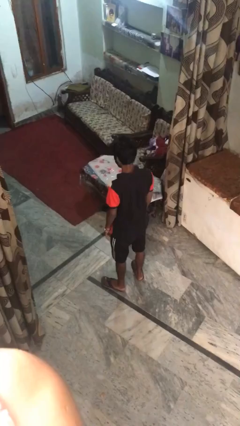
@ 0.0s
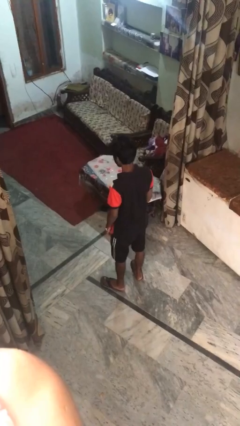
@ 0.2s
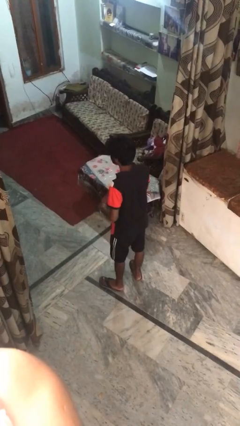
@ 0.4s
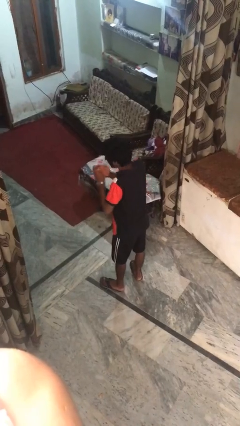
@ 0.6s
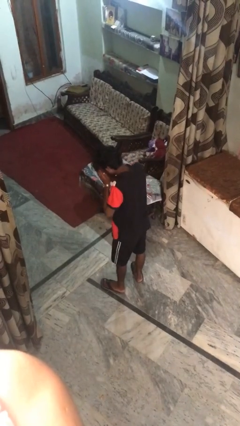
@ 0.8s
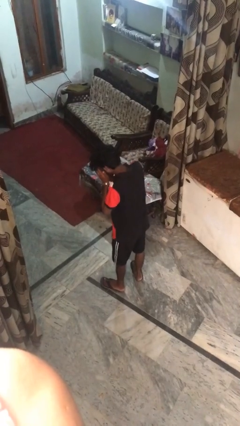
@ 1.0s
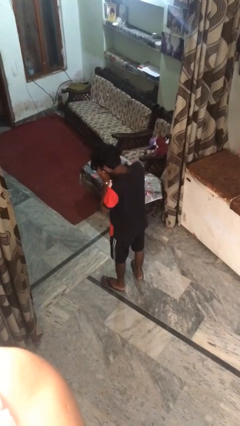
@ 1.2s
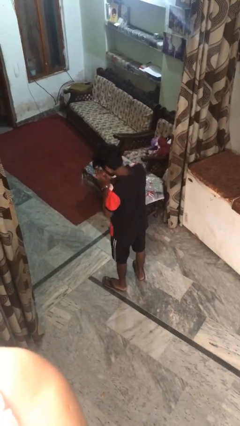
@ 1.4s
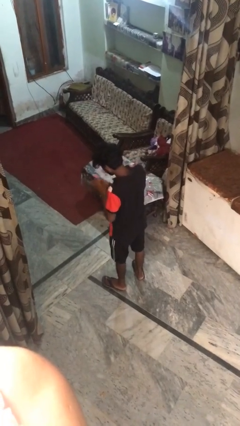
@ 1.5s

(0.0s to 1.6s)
person sneezes into hand

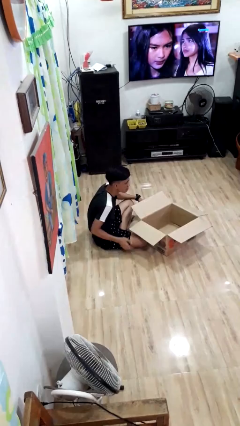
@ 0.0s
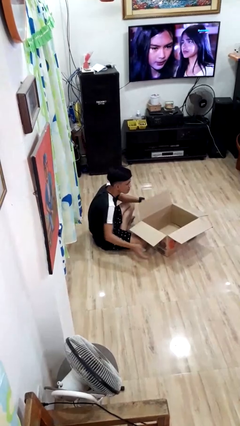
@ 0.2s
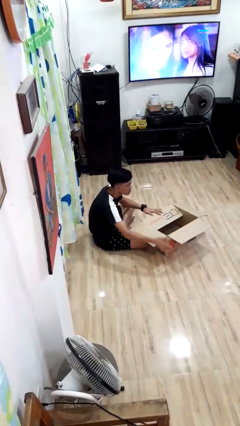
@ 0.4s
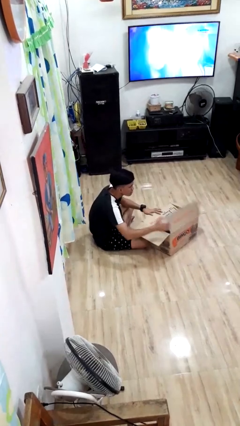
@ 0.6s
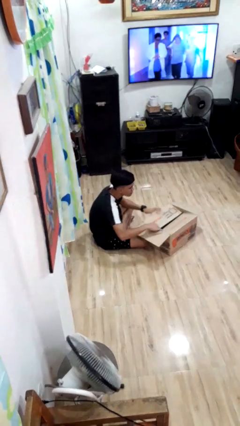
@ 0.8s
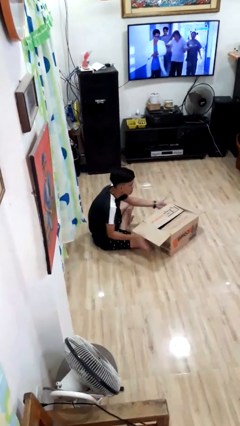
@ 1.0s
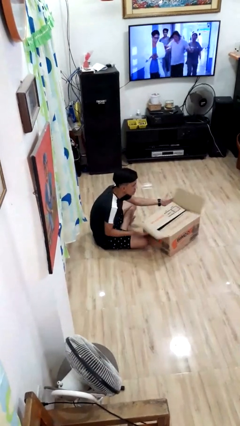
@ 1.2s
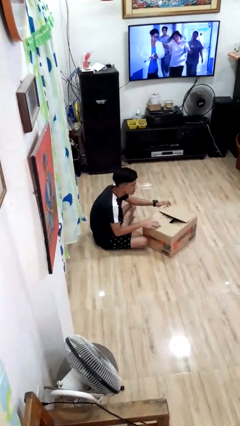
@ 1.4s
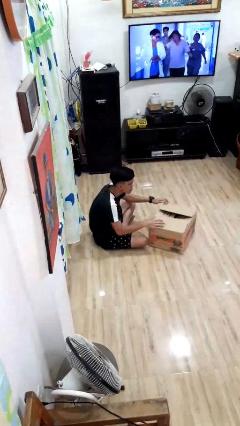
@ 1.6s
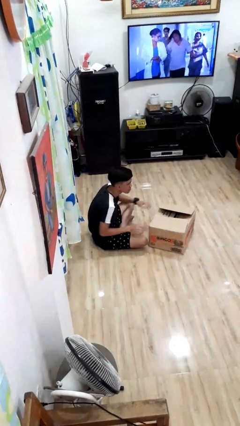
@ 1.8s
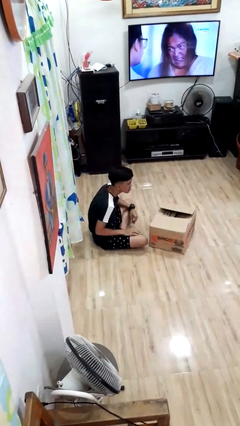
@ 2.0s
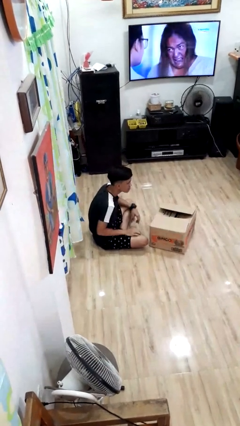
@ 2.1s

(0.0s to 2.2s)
person closes box

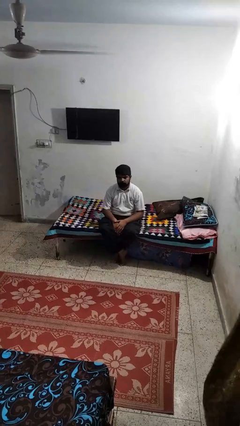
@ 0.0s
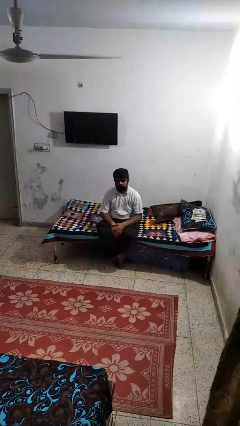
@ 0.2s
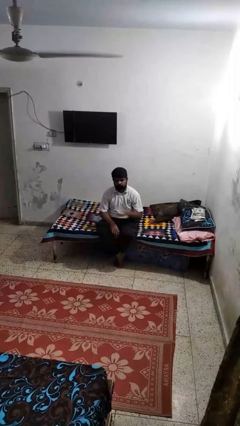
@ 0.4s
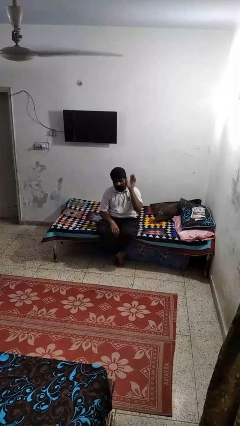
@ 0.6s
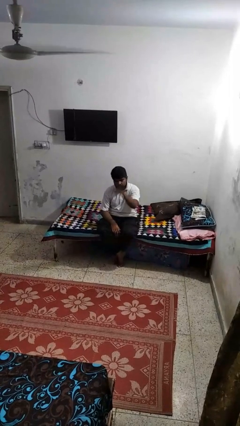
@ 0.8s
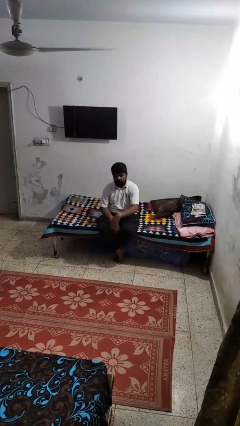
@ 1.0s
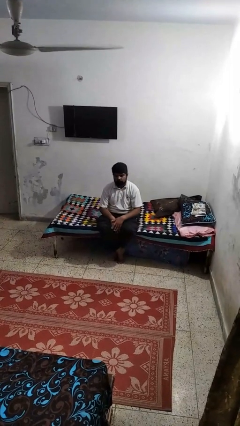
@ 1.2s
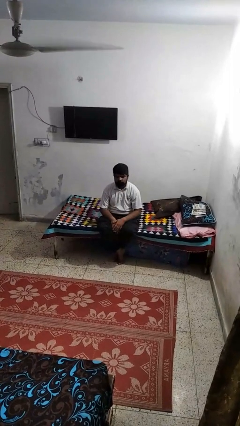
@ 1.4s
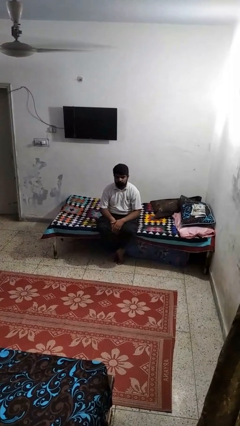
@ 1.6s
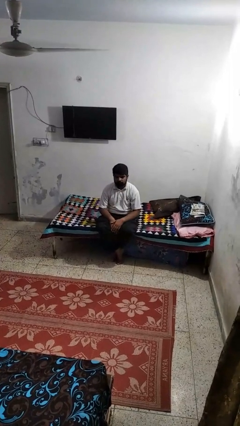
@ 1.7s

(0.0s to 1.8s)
person gestures swipe down

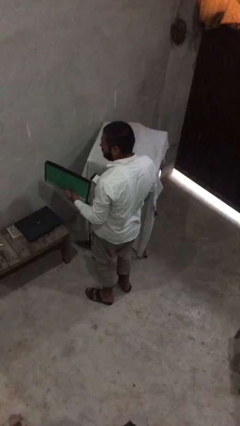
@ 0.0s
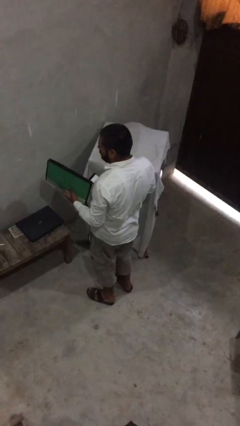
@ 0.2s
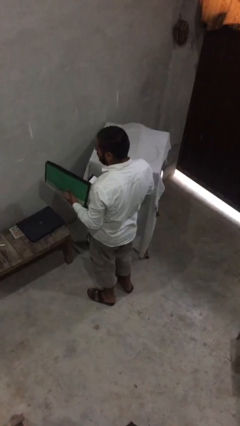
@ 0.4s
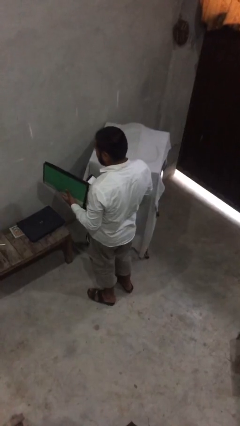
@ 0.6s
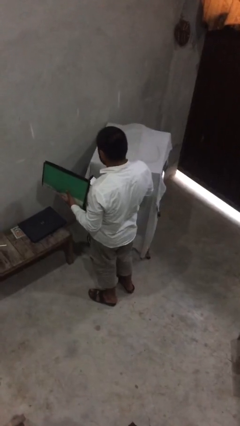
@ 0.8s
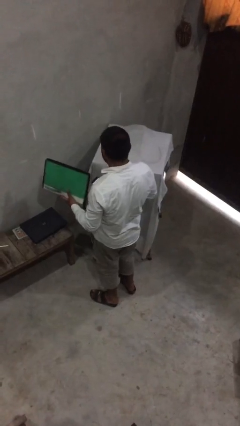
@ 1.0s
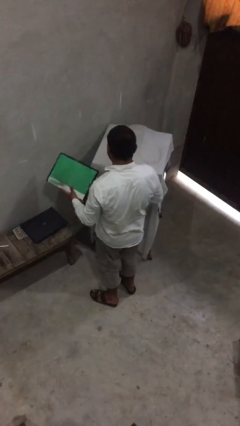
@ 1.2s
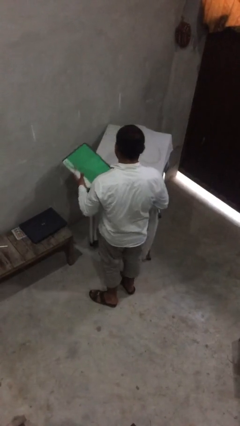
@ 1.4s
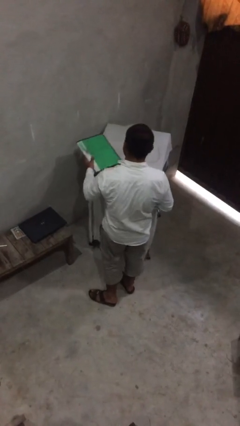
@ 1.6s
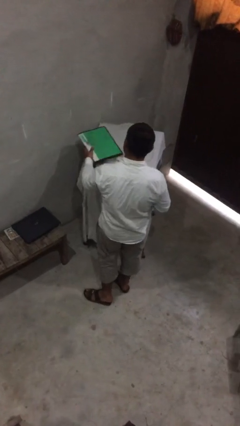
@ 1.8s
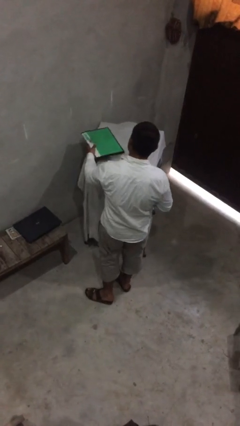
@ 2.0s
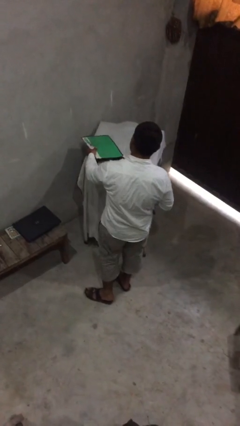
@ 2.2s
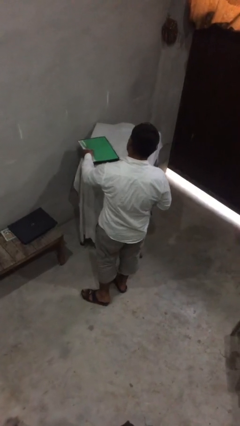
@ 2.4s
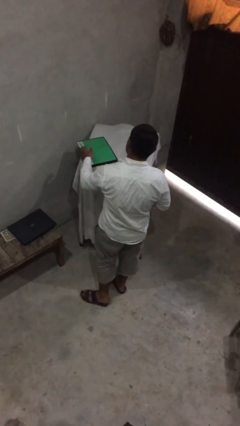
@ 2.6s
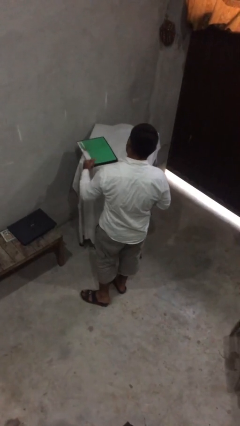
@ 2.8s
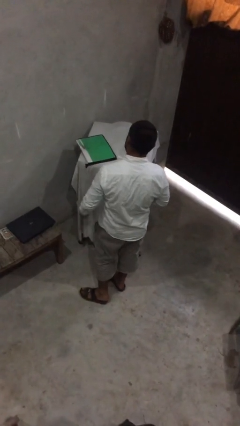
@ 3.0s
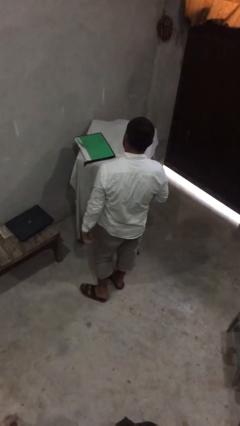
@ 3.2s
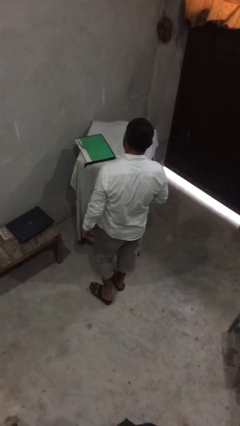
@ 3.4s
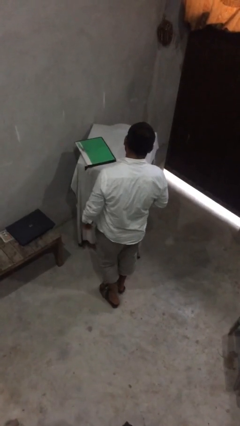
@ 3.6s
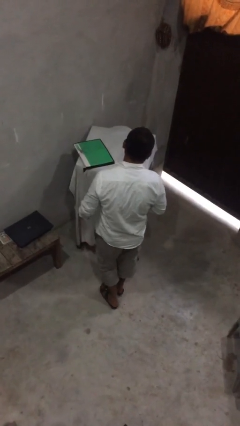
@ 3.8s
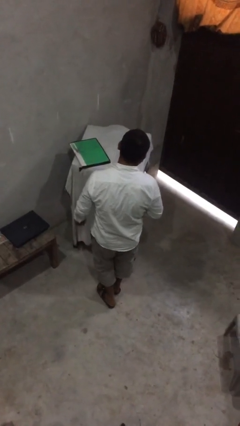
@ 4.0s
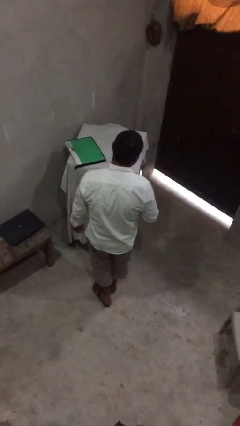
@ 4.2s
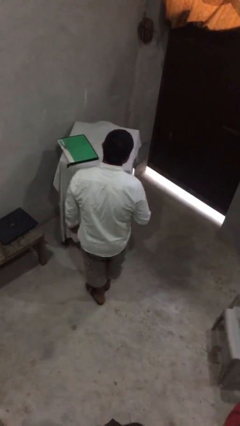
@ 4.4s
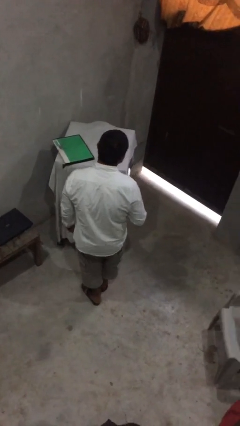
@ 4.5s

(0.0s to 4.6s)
person puts down object on shelf

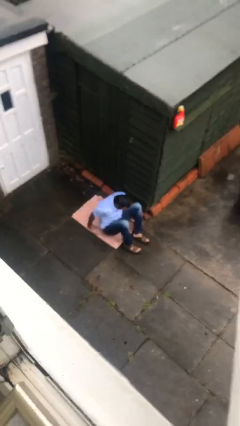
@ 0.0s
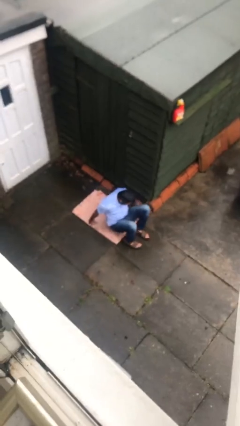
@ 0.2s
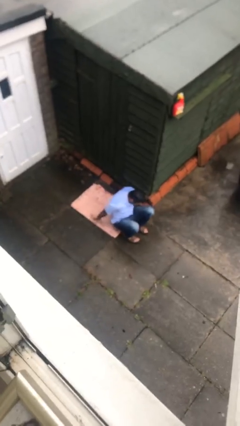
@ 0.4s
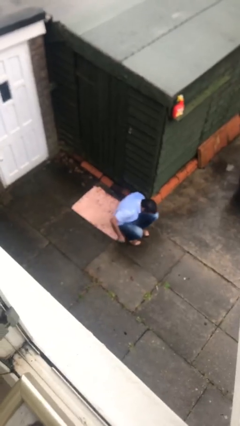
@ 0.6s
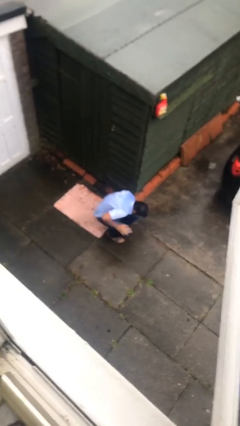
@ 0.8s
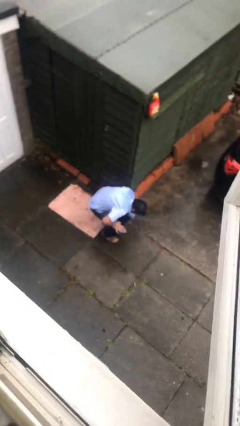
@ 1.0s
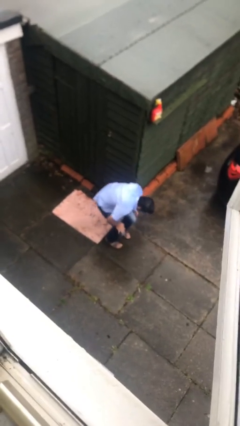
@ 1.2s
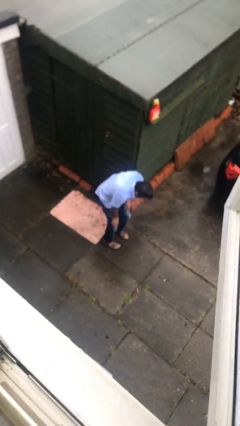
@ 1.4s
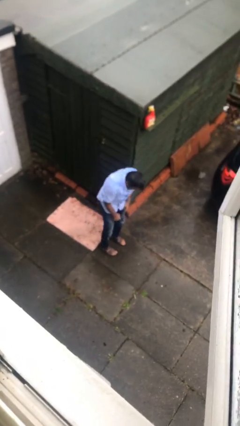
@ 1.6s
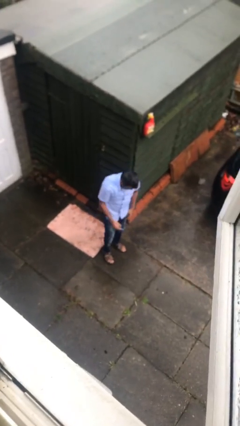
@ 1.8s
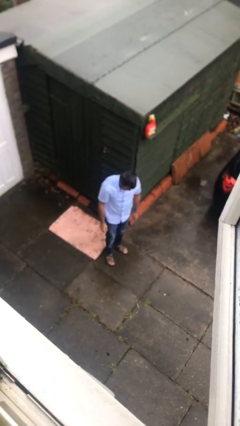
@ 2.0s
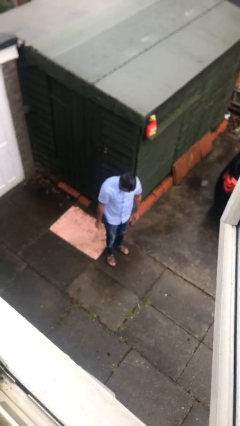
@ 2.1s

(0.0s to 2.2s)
person stands up

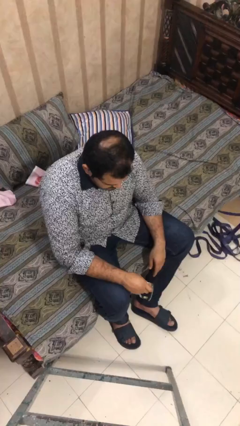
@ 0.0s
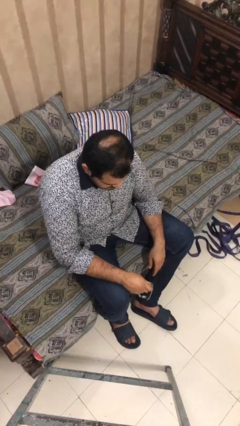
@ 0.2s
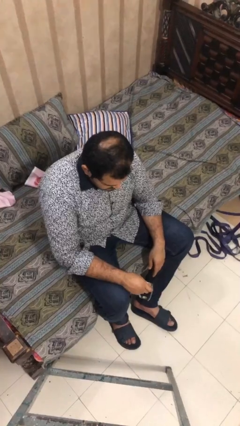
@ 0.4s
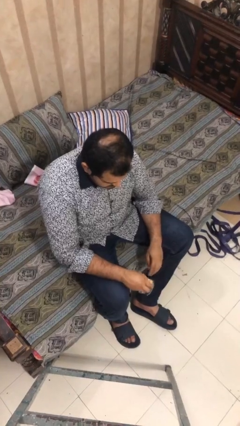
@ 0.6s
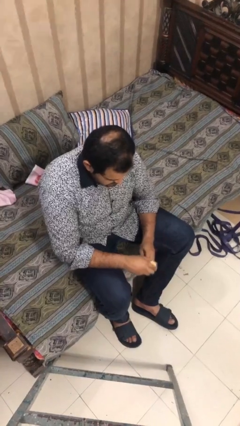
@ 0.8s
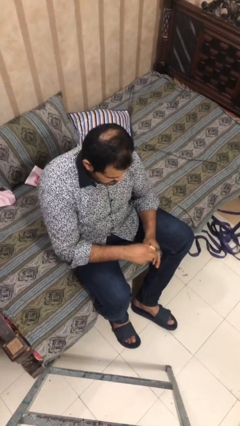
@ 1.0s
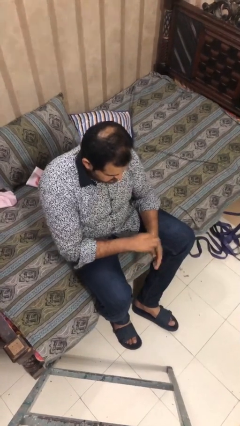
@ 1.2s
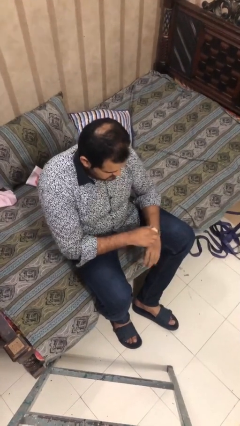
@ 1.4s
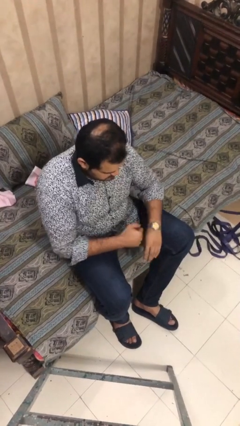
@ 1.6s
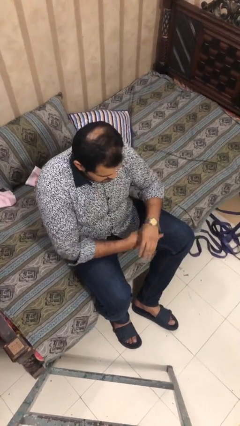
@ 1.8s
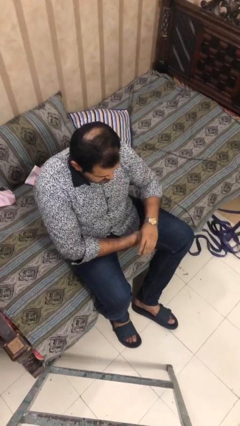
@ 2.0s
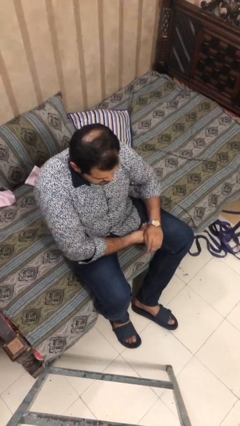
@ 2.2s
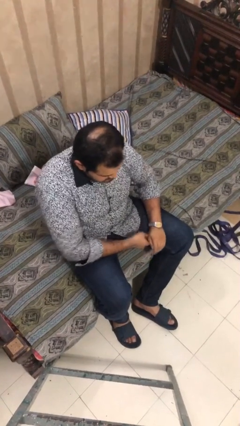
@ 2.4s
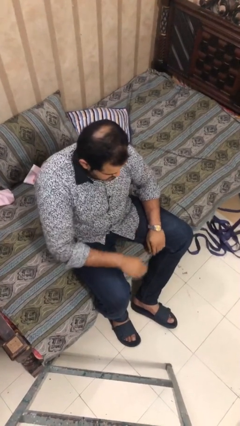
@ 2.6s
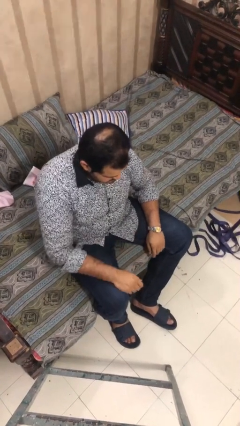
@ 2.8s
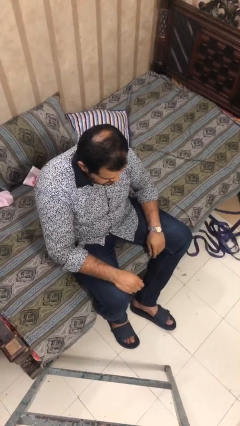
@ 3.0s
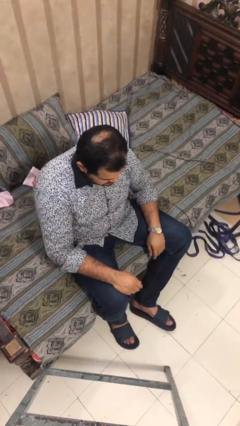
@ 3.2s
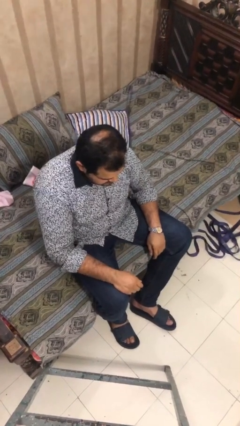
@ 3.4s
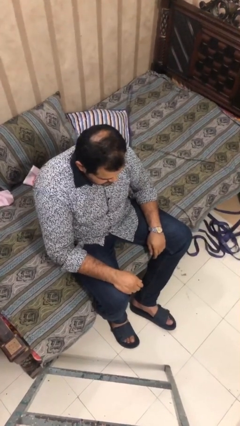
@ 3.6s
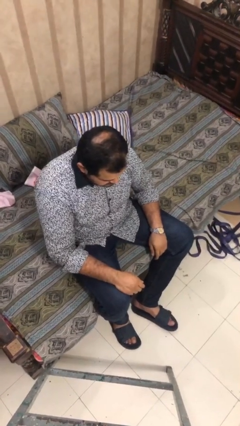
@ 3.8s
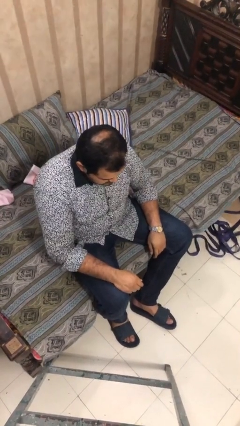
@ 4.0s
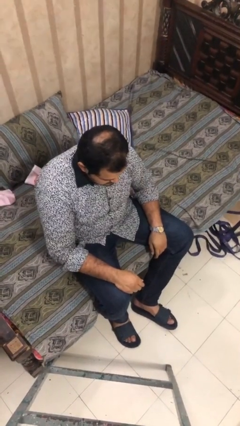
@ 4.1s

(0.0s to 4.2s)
person puts on wristwatch

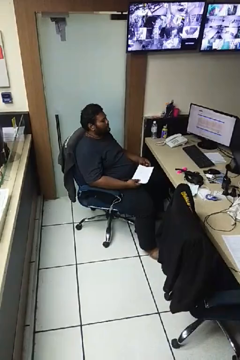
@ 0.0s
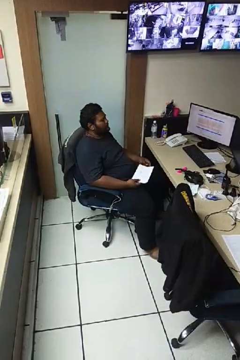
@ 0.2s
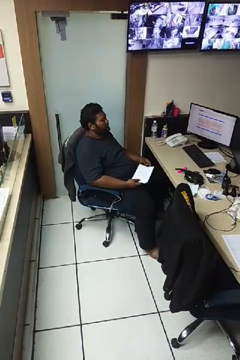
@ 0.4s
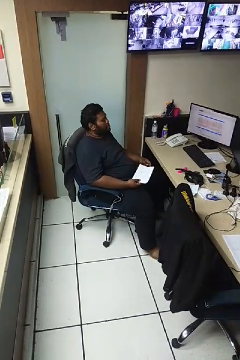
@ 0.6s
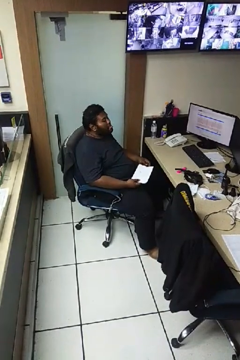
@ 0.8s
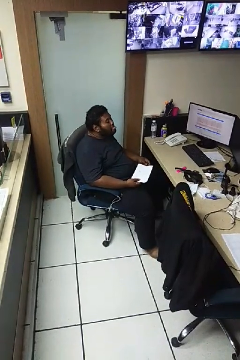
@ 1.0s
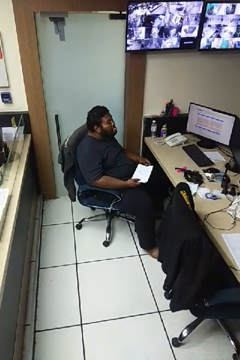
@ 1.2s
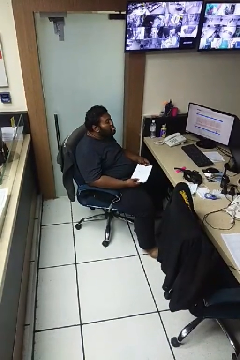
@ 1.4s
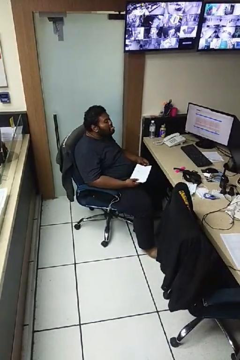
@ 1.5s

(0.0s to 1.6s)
person sticks out tongue
